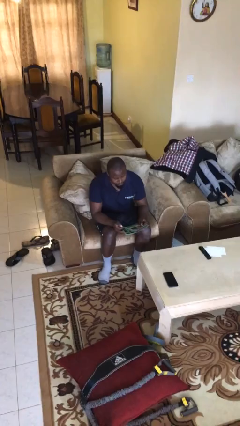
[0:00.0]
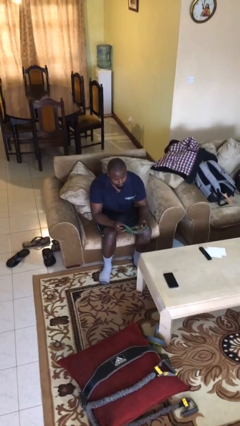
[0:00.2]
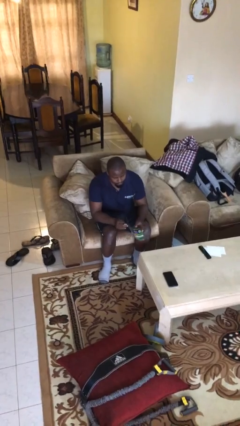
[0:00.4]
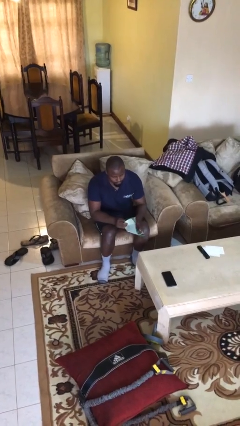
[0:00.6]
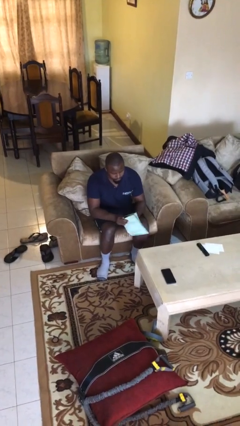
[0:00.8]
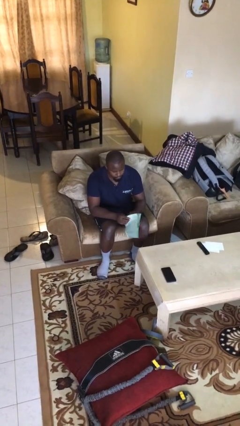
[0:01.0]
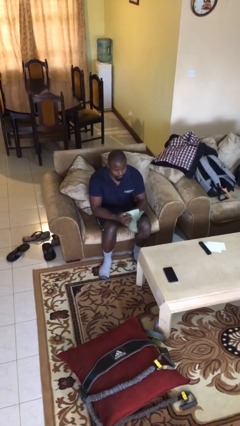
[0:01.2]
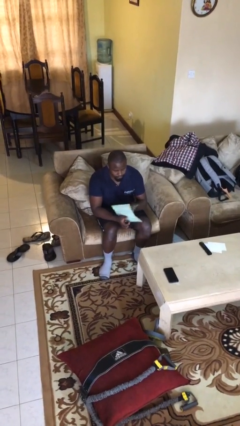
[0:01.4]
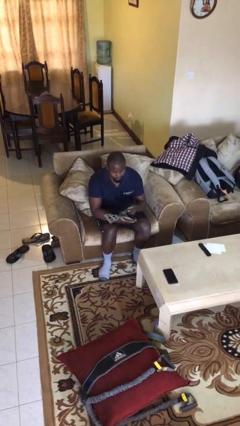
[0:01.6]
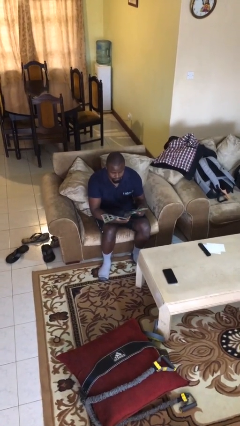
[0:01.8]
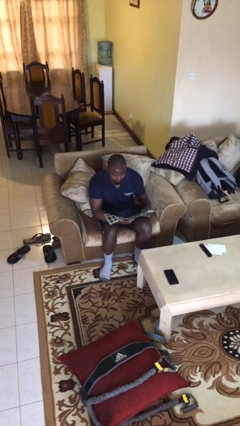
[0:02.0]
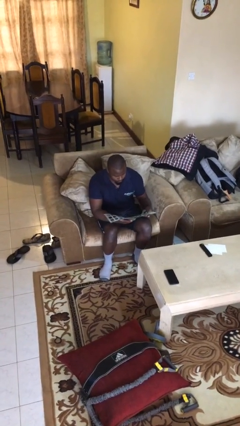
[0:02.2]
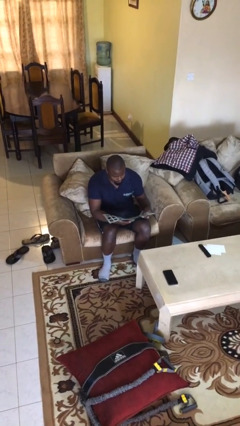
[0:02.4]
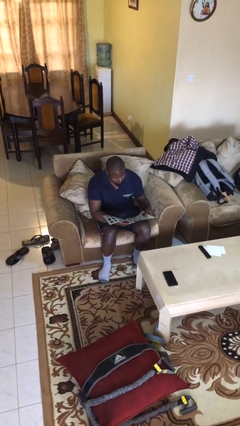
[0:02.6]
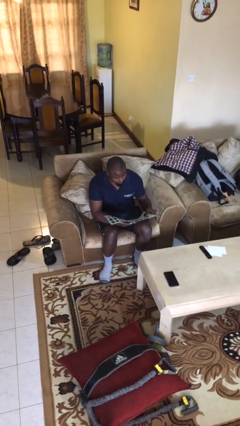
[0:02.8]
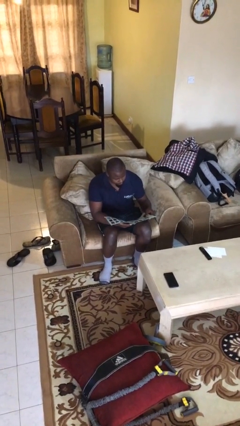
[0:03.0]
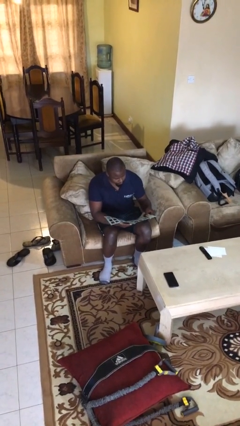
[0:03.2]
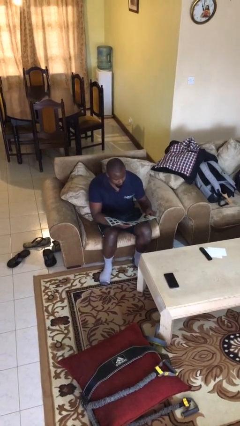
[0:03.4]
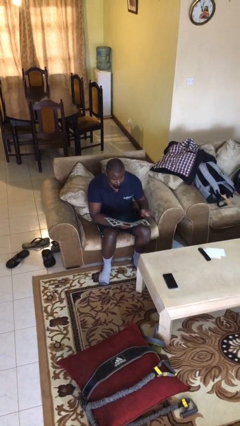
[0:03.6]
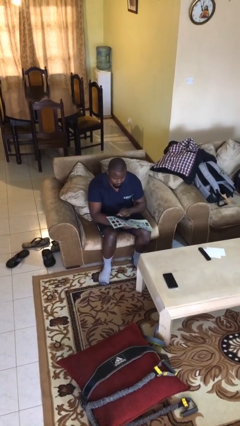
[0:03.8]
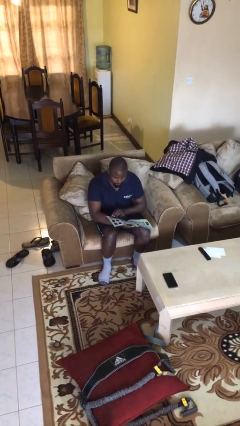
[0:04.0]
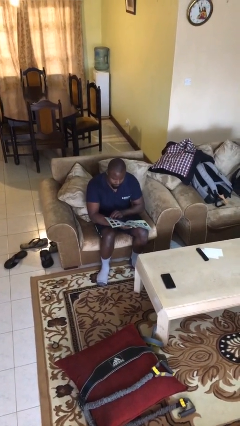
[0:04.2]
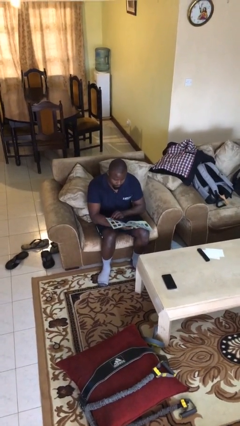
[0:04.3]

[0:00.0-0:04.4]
person reads document

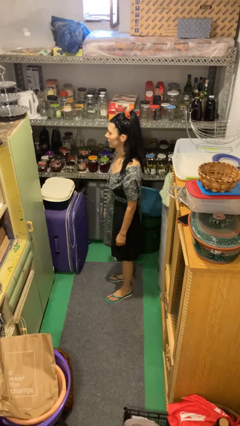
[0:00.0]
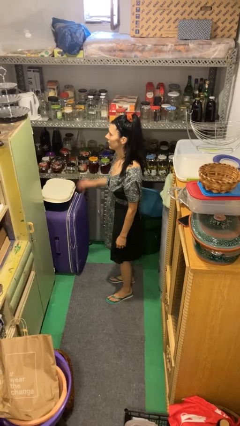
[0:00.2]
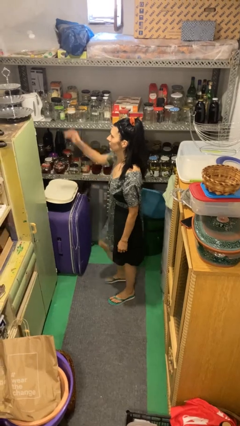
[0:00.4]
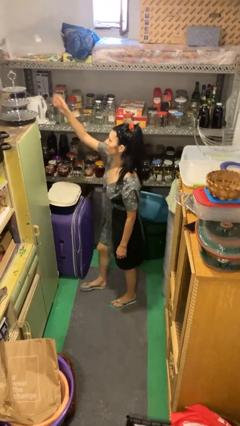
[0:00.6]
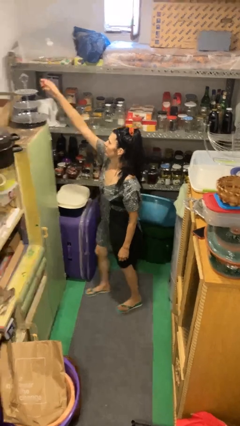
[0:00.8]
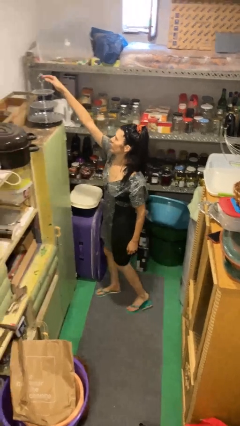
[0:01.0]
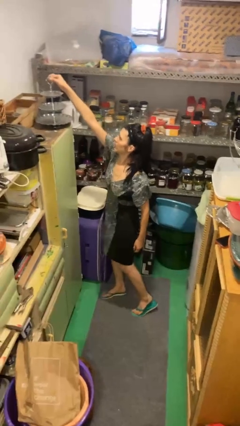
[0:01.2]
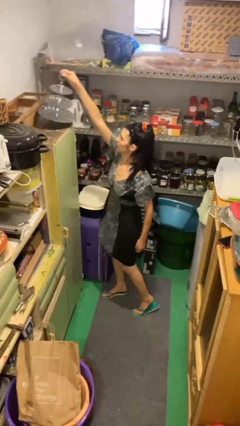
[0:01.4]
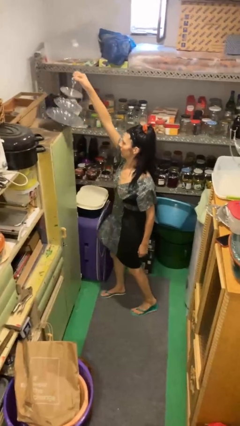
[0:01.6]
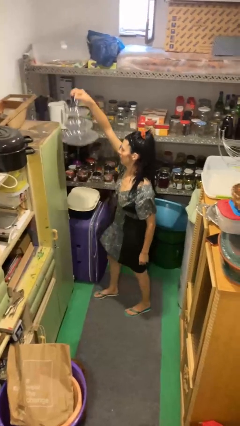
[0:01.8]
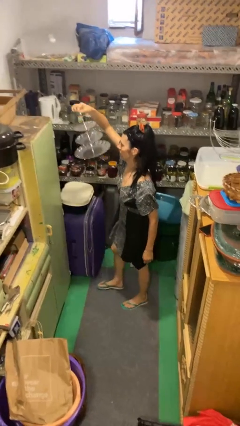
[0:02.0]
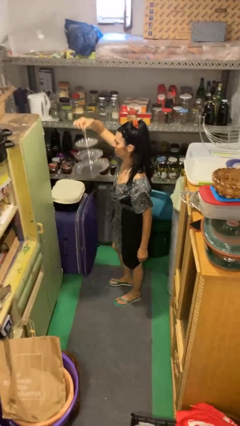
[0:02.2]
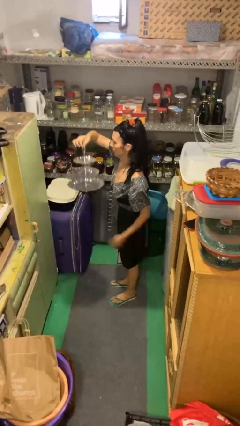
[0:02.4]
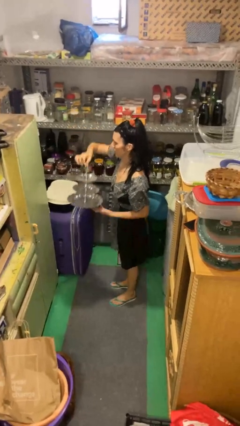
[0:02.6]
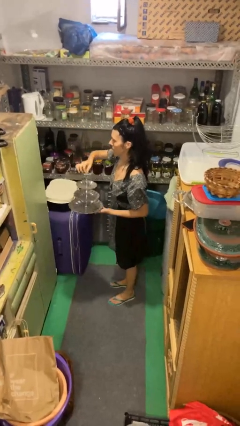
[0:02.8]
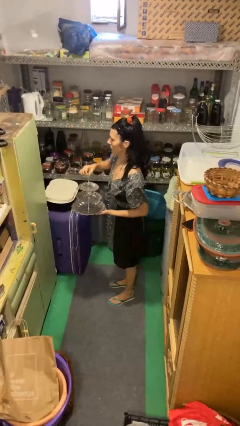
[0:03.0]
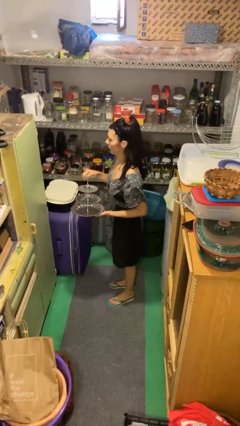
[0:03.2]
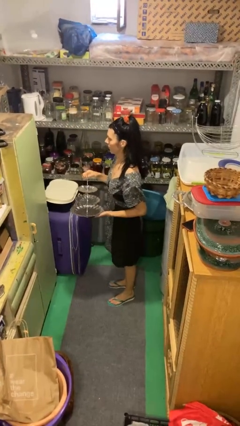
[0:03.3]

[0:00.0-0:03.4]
person picks up object from countertop

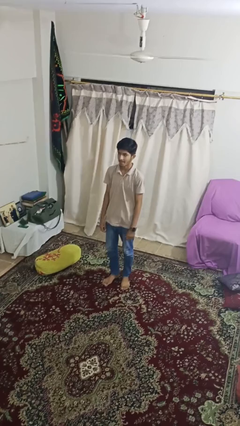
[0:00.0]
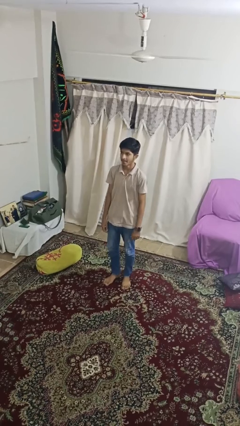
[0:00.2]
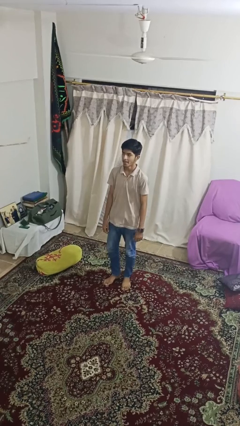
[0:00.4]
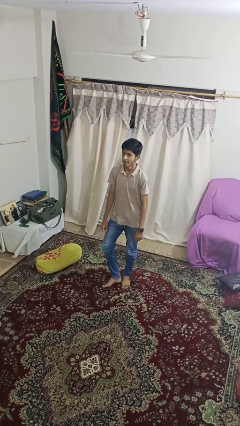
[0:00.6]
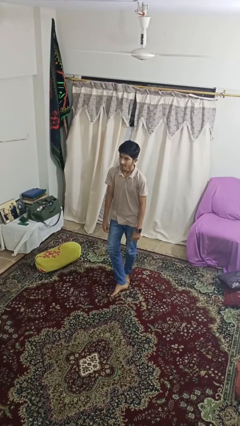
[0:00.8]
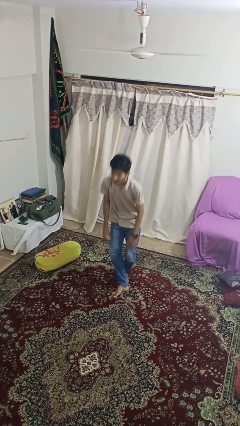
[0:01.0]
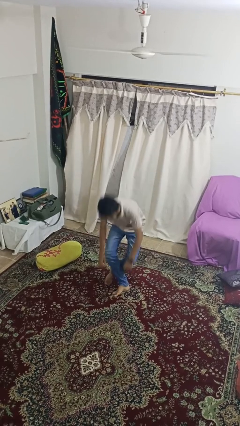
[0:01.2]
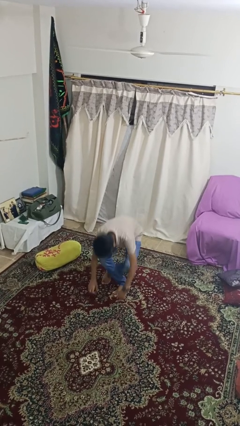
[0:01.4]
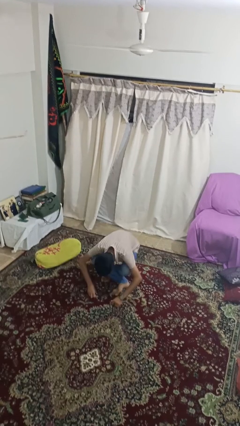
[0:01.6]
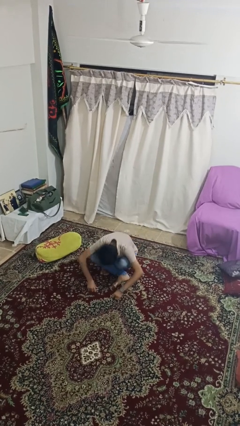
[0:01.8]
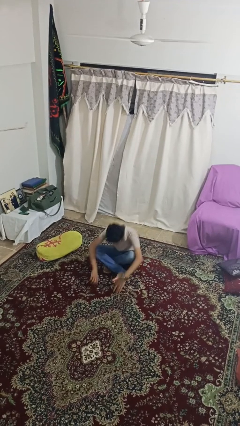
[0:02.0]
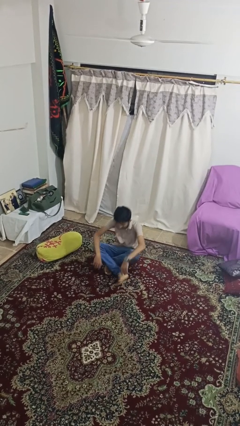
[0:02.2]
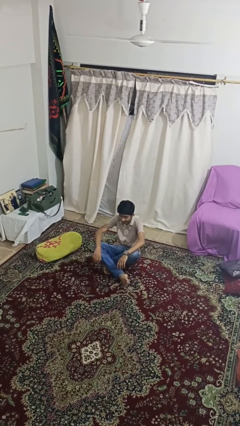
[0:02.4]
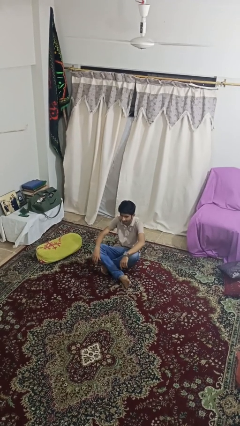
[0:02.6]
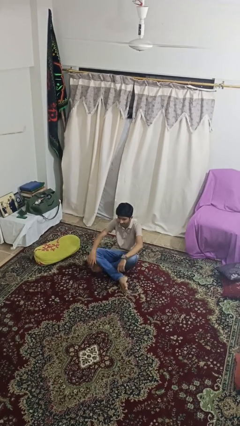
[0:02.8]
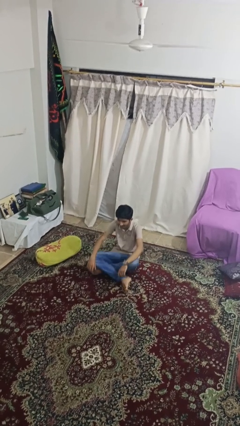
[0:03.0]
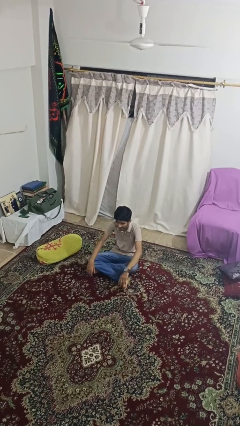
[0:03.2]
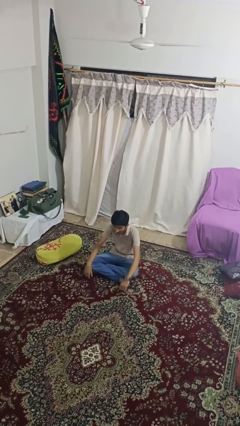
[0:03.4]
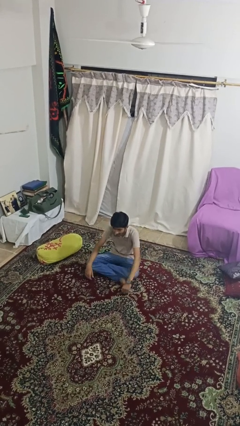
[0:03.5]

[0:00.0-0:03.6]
person sits crisscross

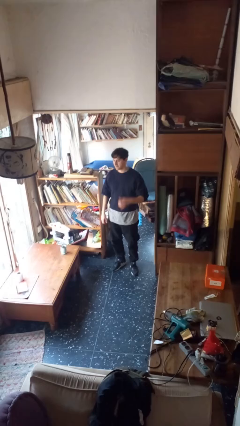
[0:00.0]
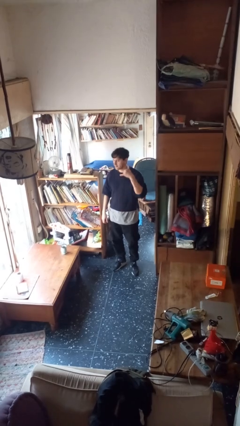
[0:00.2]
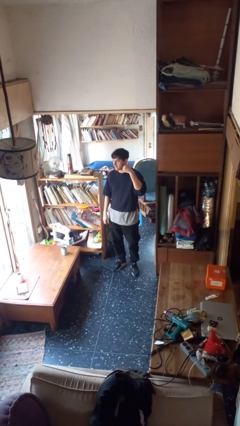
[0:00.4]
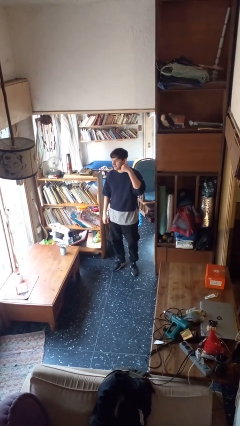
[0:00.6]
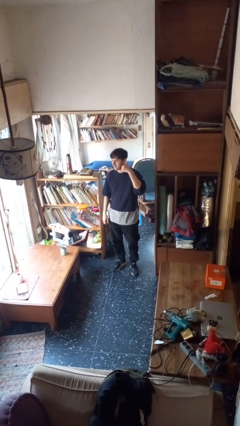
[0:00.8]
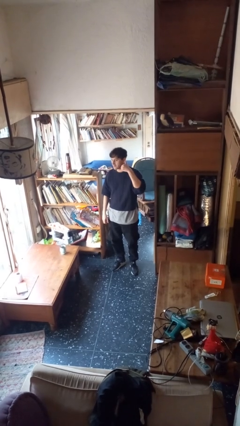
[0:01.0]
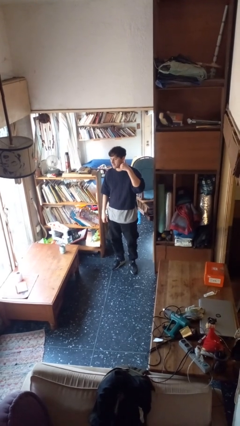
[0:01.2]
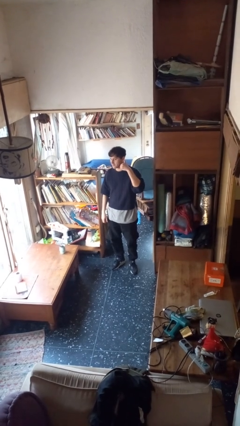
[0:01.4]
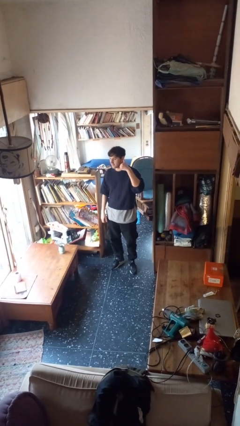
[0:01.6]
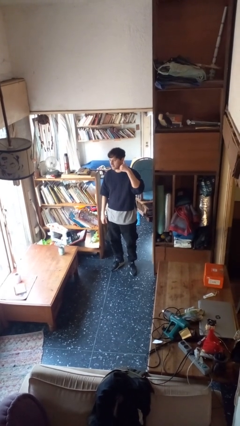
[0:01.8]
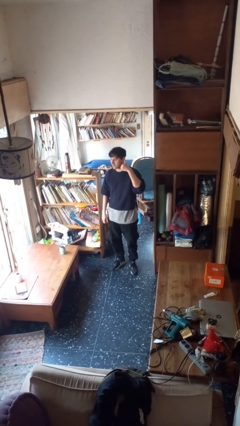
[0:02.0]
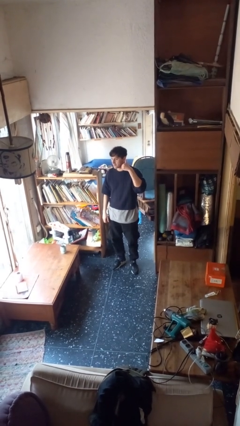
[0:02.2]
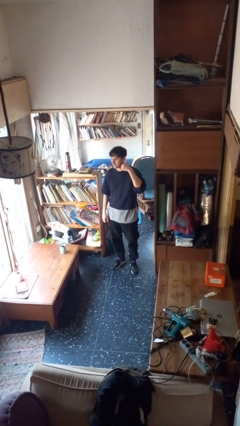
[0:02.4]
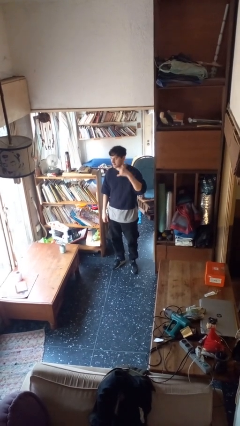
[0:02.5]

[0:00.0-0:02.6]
person gestures call me

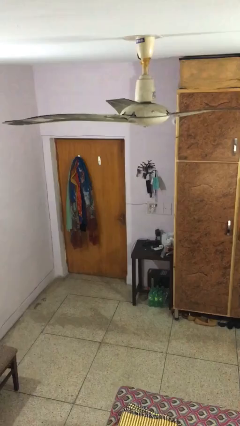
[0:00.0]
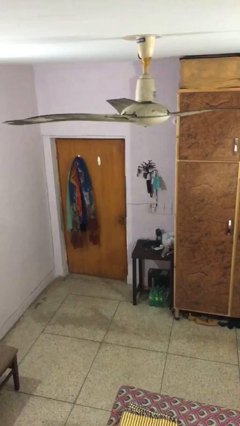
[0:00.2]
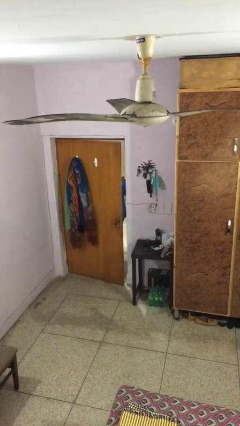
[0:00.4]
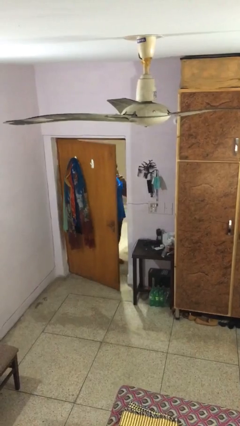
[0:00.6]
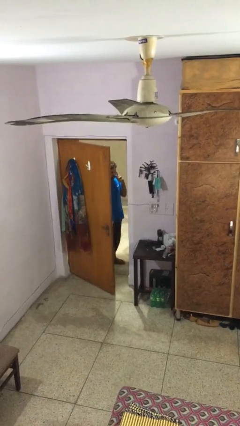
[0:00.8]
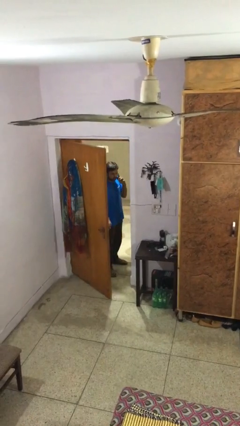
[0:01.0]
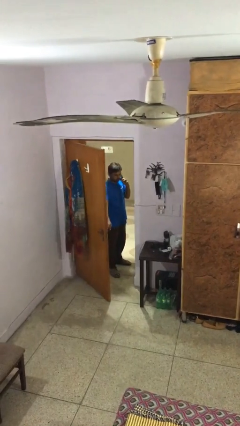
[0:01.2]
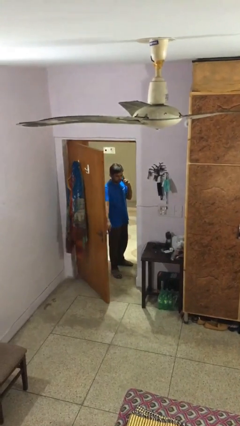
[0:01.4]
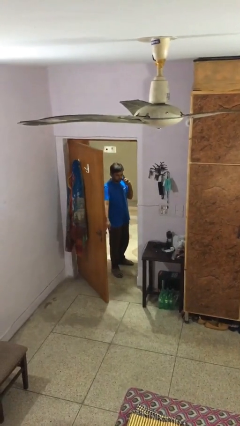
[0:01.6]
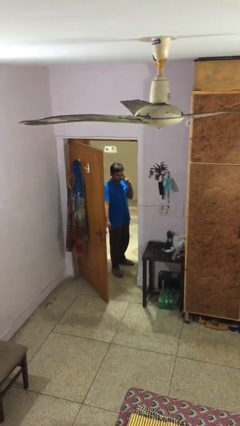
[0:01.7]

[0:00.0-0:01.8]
person opens facility door

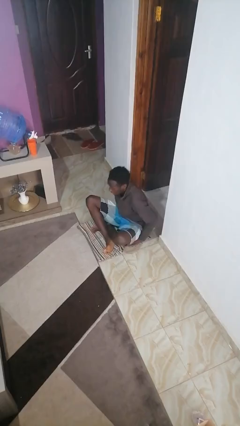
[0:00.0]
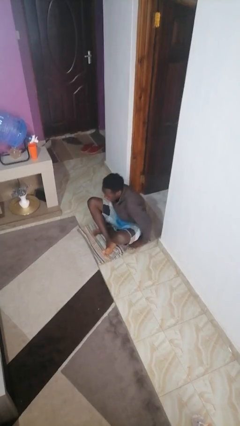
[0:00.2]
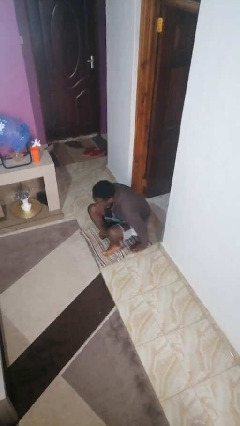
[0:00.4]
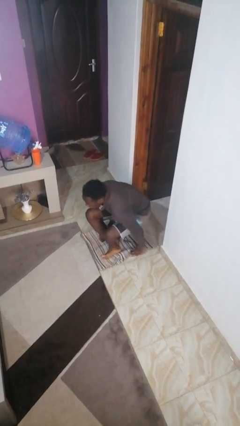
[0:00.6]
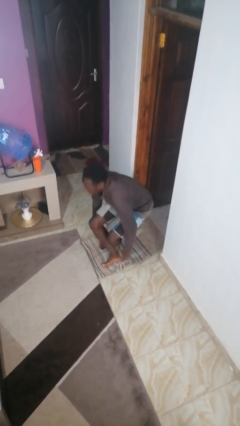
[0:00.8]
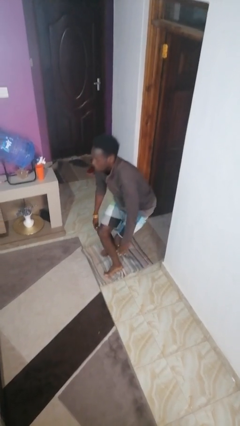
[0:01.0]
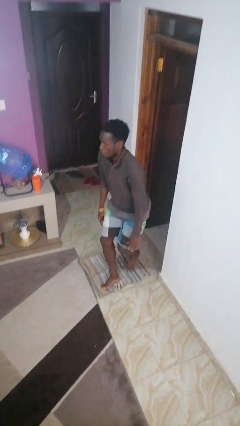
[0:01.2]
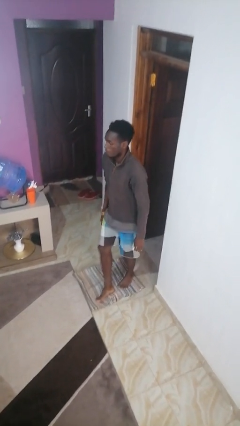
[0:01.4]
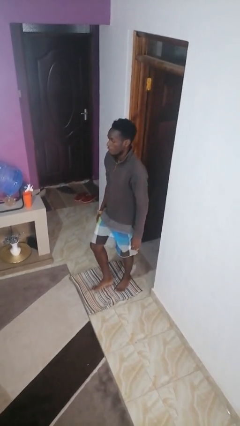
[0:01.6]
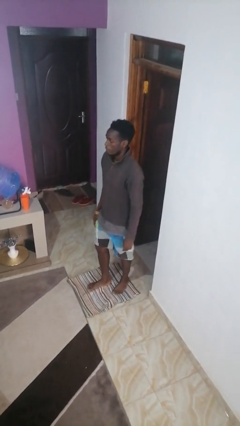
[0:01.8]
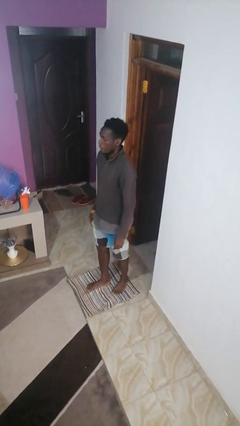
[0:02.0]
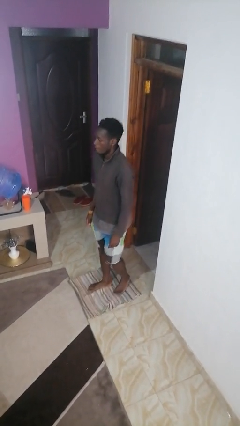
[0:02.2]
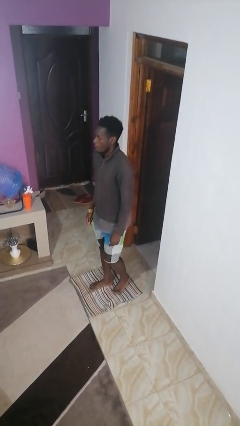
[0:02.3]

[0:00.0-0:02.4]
person stands up from floor
